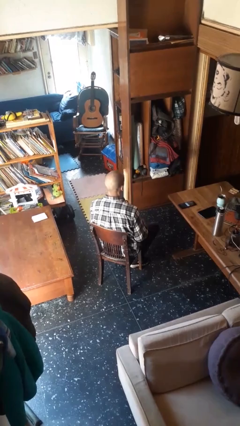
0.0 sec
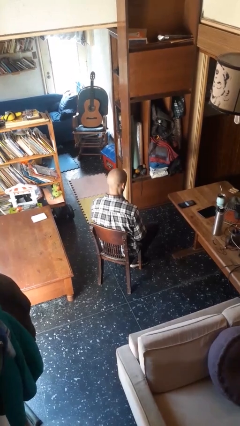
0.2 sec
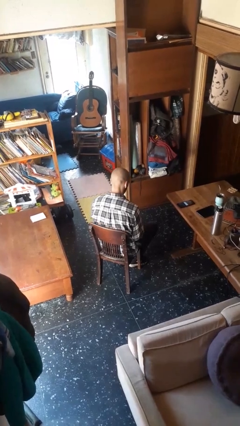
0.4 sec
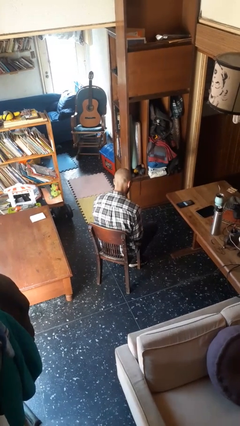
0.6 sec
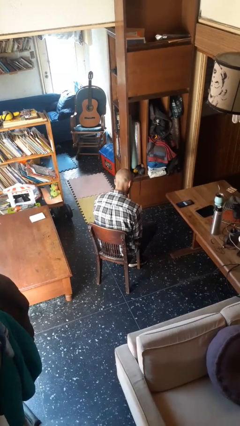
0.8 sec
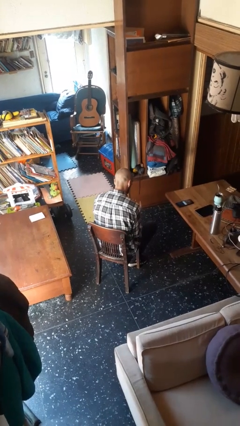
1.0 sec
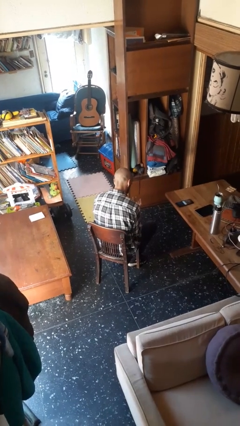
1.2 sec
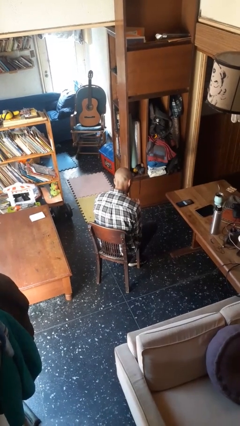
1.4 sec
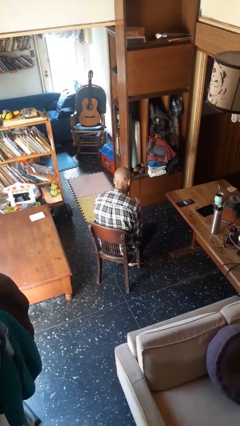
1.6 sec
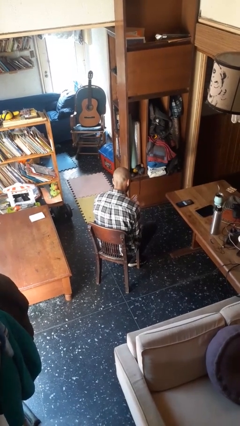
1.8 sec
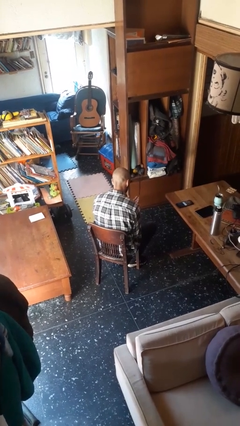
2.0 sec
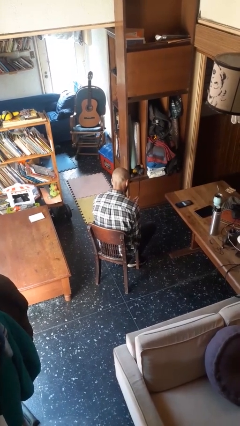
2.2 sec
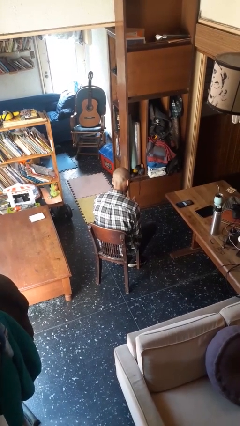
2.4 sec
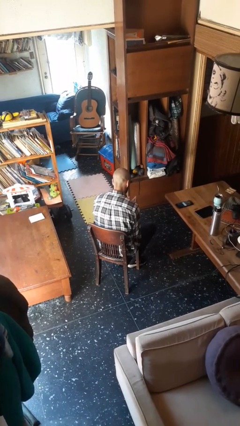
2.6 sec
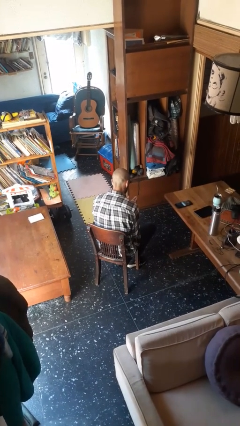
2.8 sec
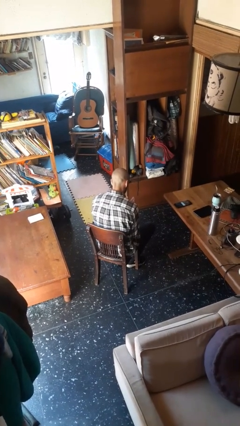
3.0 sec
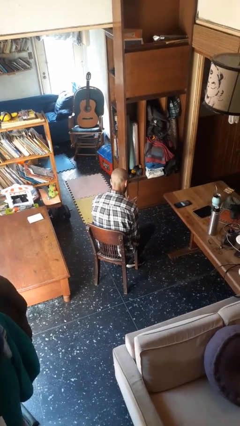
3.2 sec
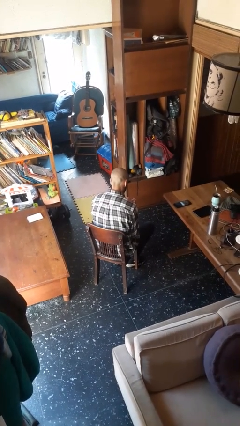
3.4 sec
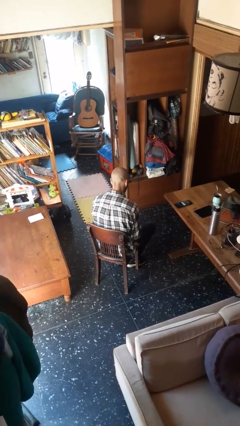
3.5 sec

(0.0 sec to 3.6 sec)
person looks at hands in lap

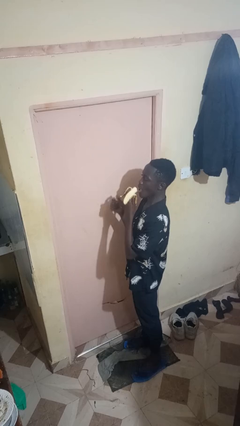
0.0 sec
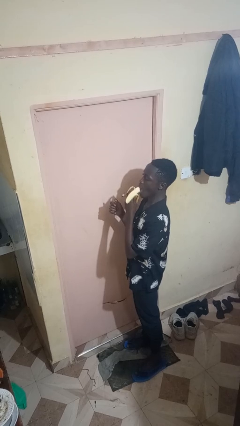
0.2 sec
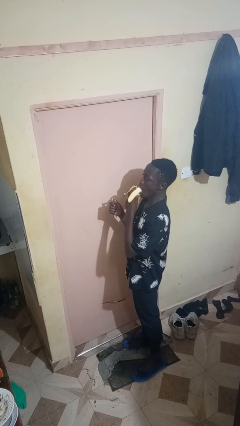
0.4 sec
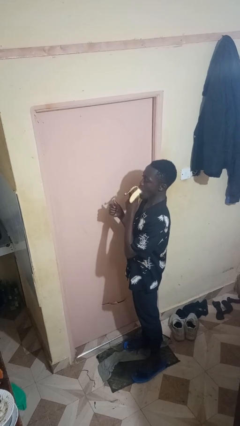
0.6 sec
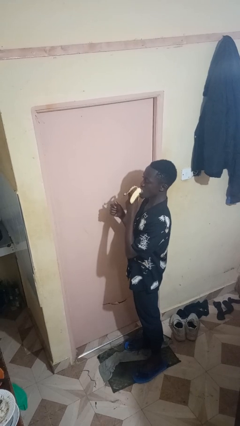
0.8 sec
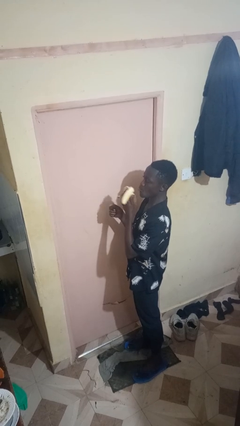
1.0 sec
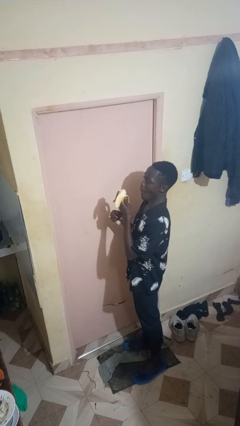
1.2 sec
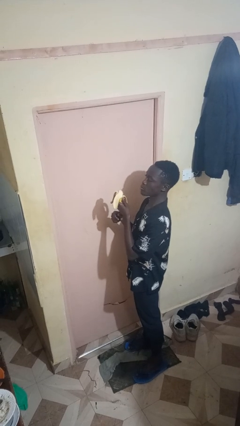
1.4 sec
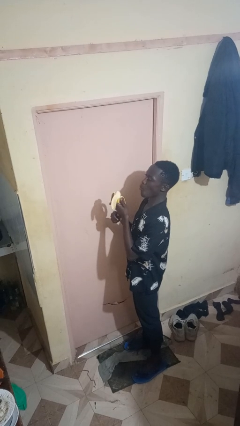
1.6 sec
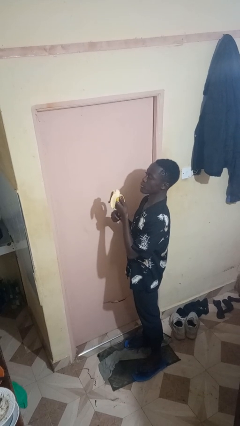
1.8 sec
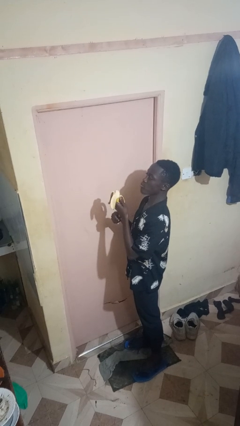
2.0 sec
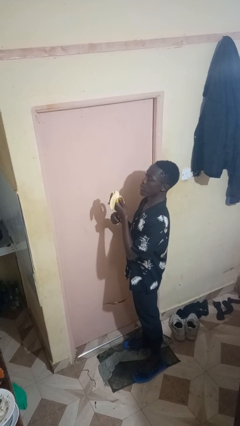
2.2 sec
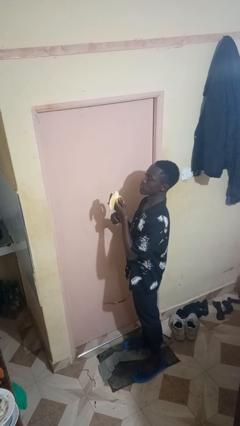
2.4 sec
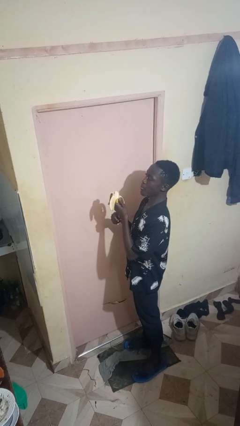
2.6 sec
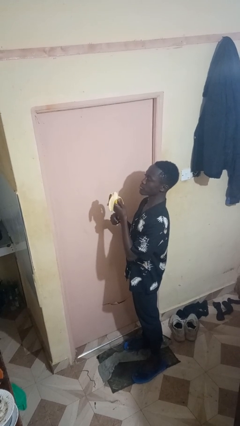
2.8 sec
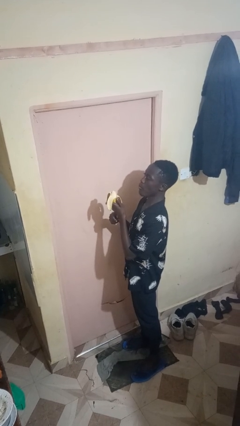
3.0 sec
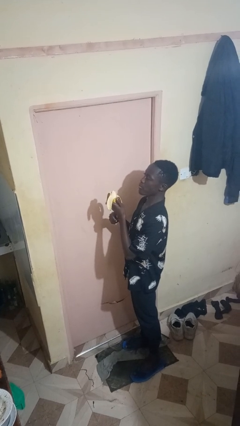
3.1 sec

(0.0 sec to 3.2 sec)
person eats banana

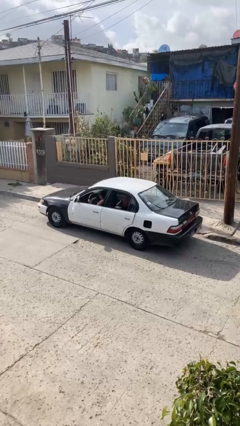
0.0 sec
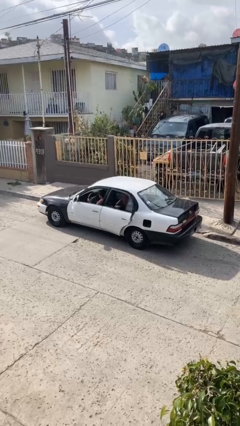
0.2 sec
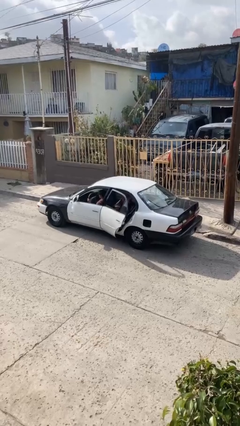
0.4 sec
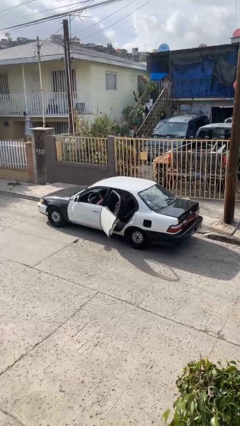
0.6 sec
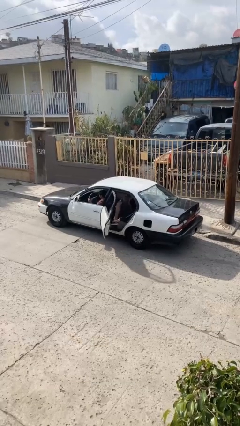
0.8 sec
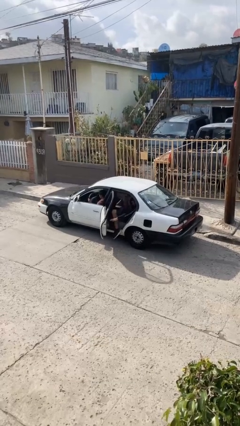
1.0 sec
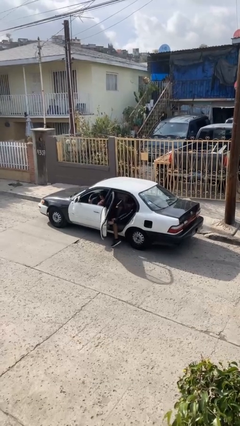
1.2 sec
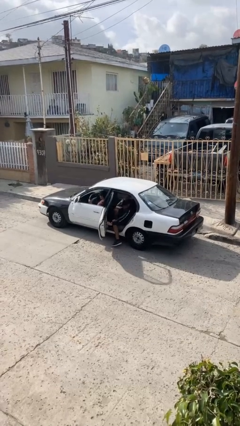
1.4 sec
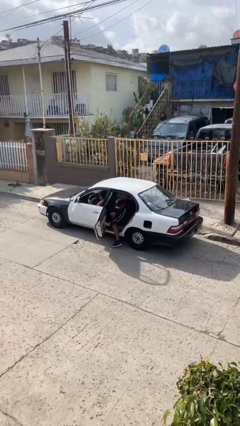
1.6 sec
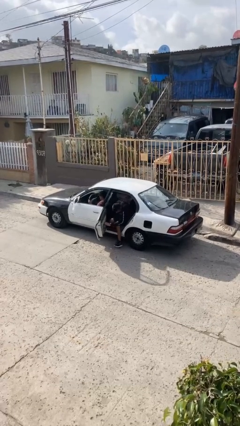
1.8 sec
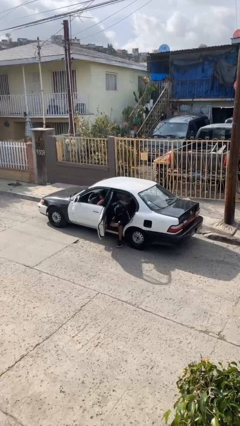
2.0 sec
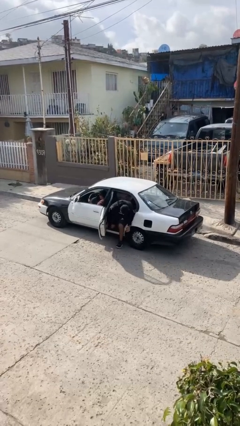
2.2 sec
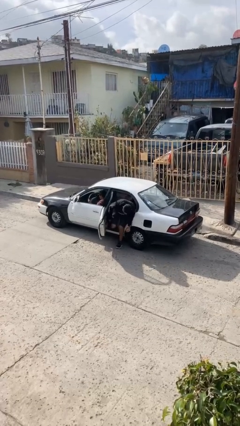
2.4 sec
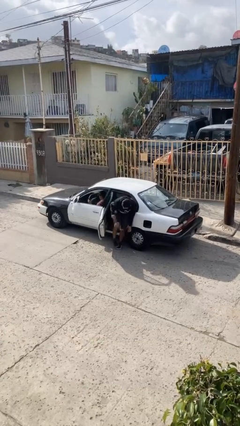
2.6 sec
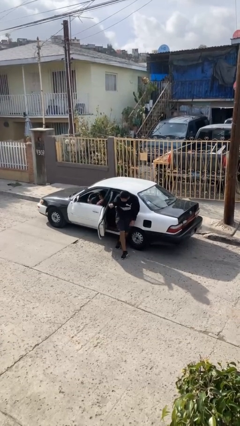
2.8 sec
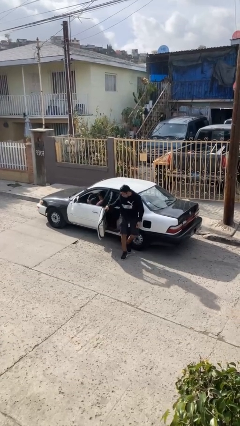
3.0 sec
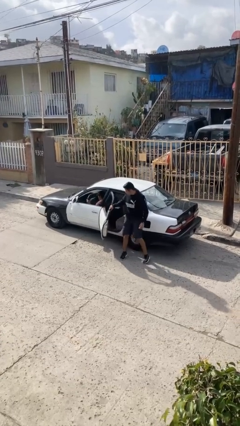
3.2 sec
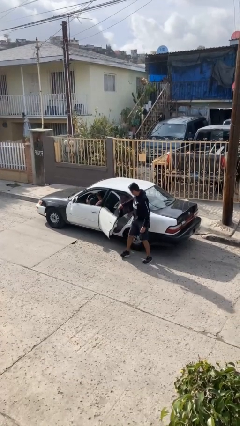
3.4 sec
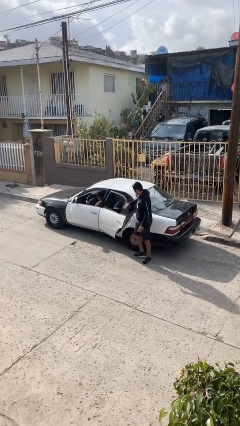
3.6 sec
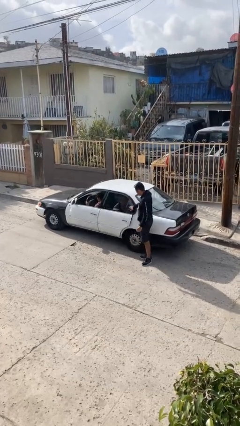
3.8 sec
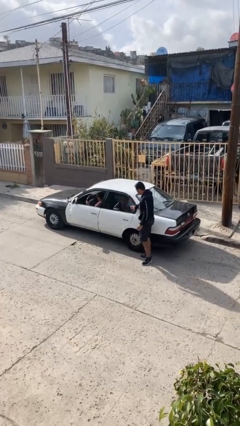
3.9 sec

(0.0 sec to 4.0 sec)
car drops off person

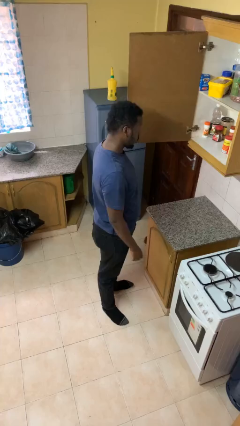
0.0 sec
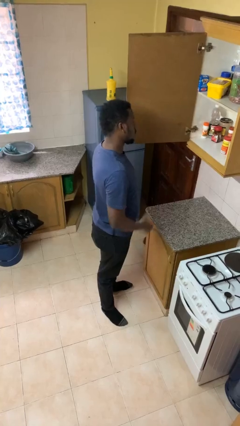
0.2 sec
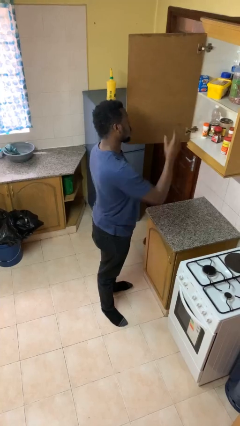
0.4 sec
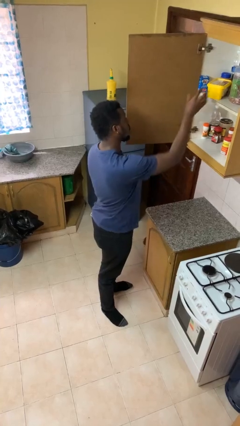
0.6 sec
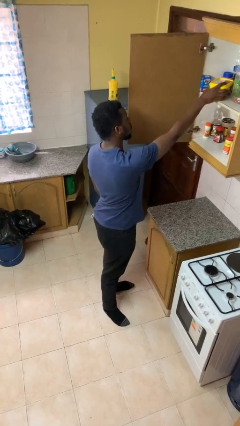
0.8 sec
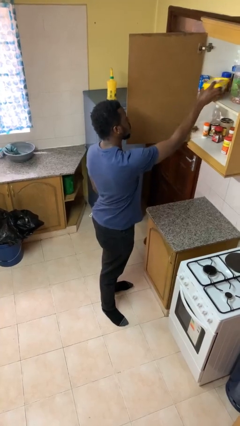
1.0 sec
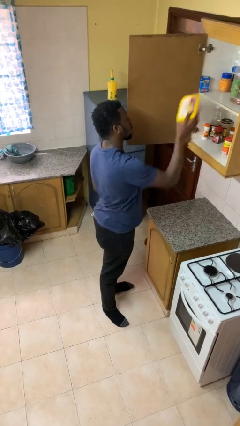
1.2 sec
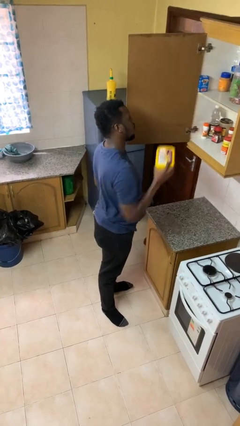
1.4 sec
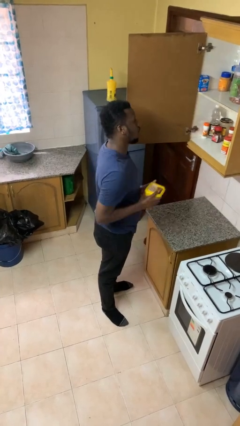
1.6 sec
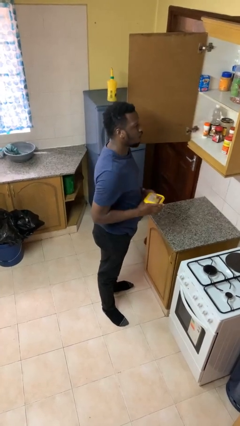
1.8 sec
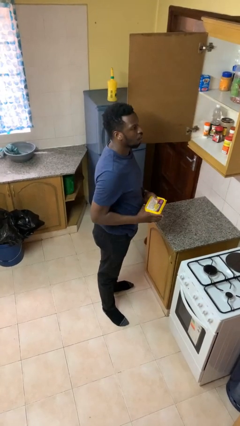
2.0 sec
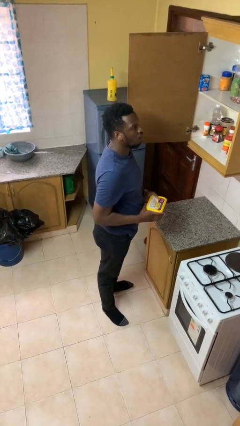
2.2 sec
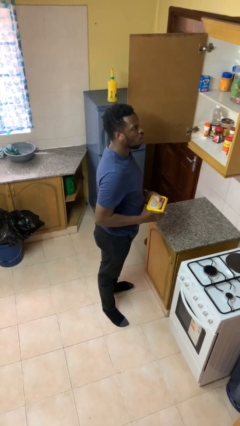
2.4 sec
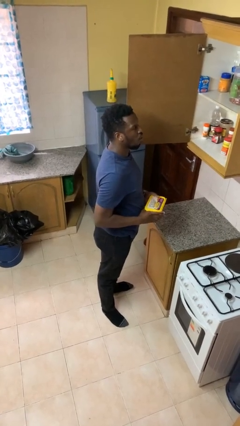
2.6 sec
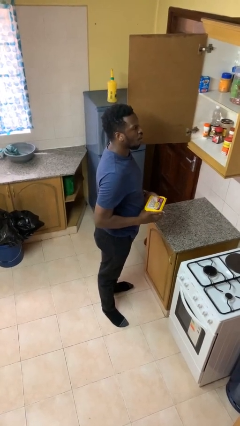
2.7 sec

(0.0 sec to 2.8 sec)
person picks up object from shelf

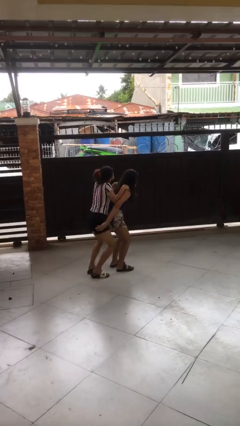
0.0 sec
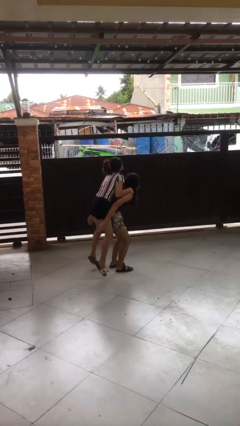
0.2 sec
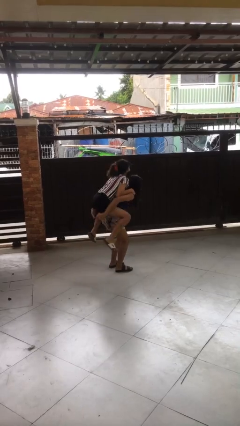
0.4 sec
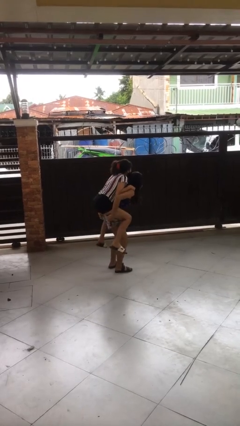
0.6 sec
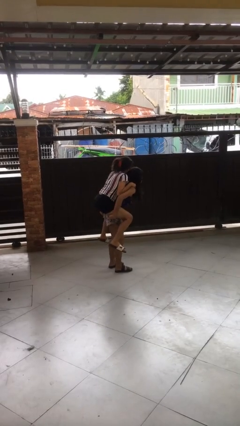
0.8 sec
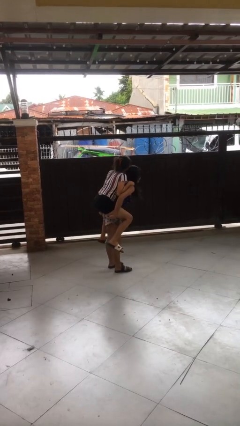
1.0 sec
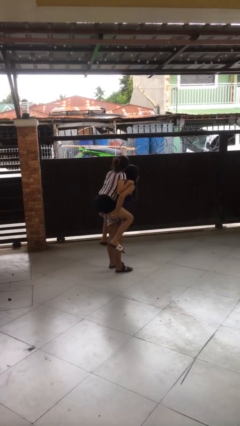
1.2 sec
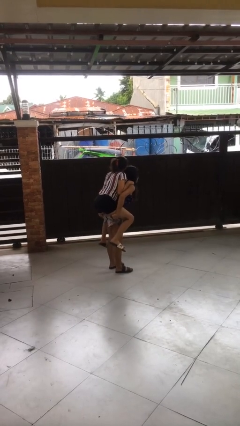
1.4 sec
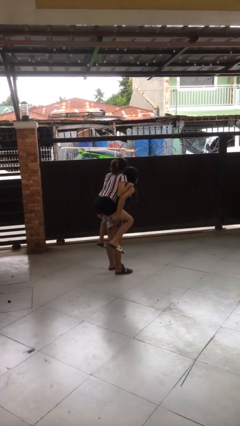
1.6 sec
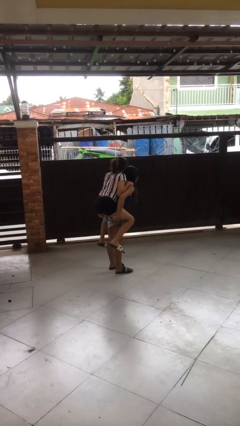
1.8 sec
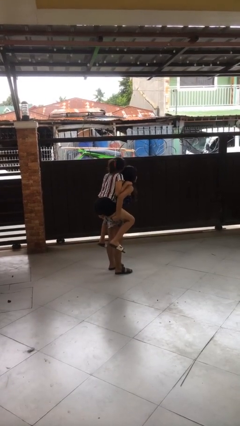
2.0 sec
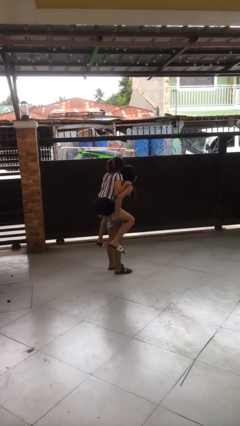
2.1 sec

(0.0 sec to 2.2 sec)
person carries person over shoulder

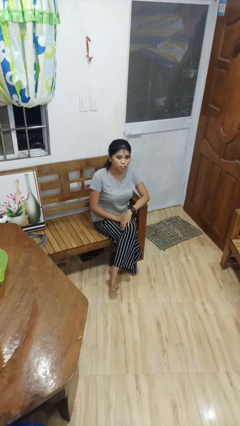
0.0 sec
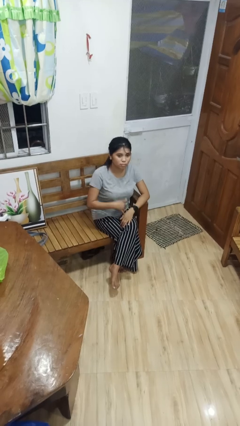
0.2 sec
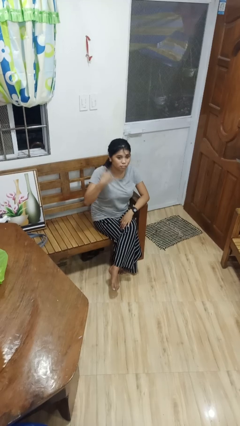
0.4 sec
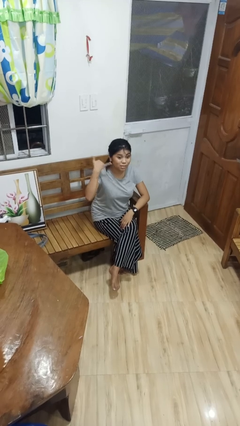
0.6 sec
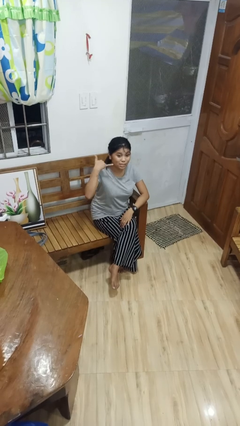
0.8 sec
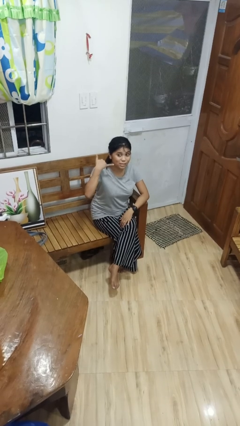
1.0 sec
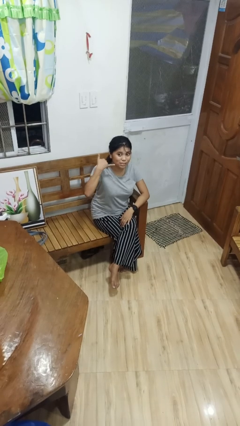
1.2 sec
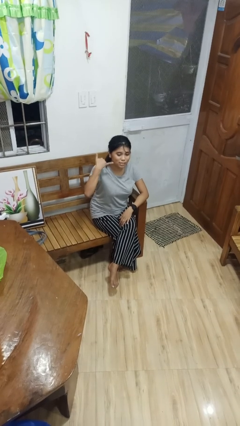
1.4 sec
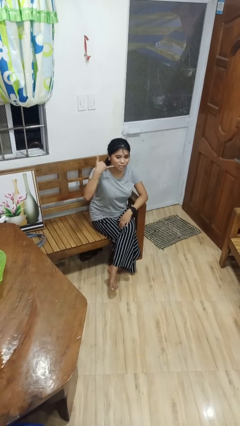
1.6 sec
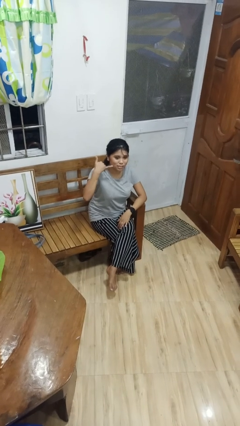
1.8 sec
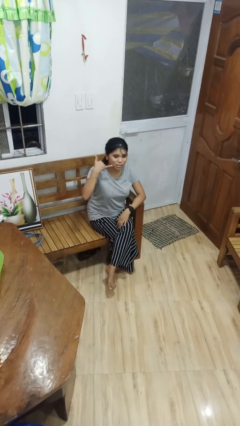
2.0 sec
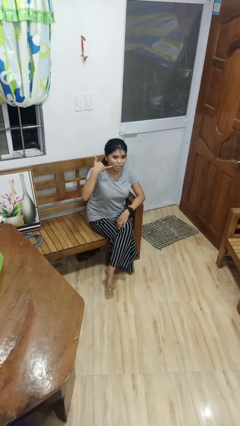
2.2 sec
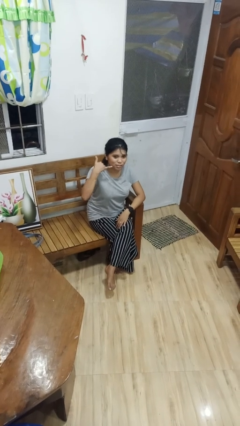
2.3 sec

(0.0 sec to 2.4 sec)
person gestures call me
